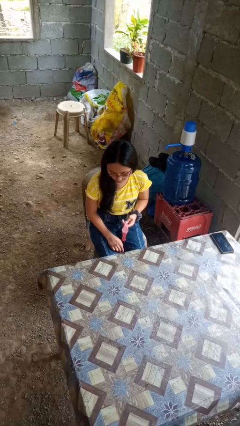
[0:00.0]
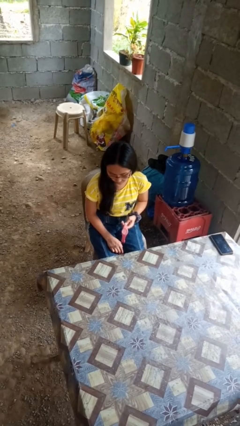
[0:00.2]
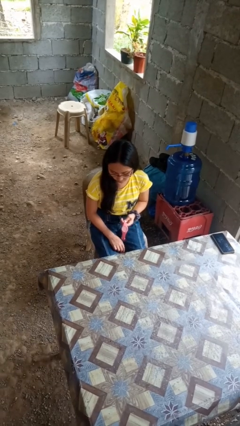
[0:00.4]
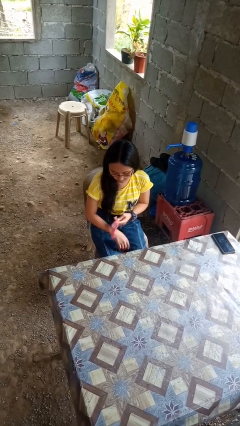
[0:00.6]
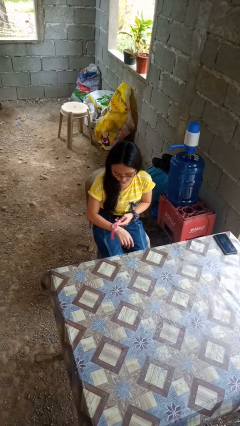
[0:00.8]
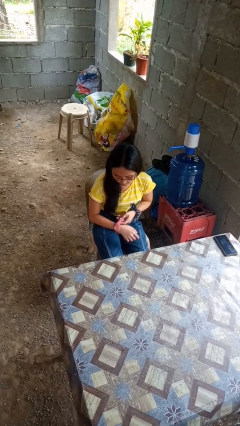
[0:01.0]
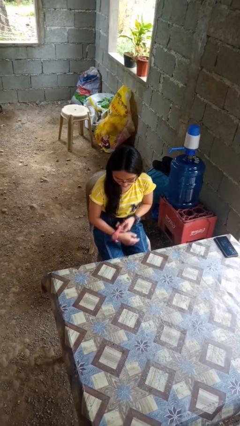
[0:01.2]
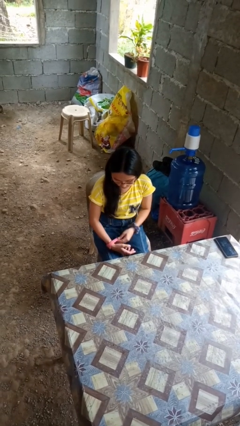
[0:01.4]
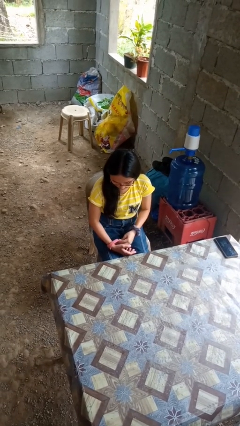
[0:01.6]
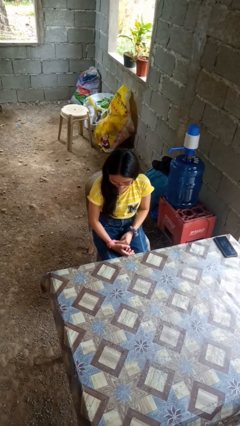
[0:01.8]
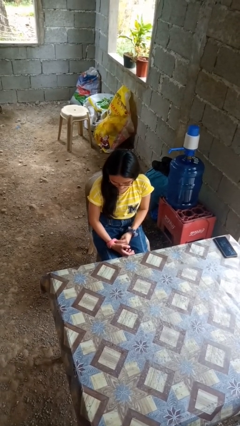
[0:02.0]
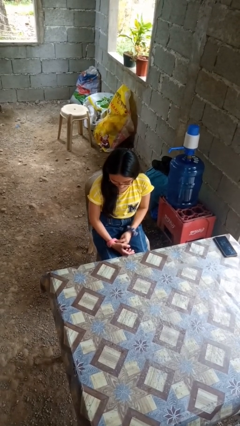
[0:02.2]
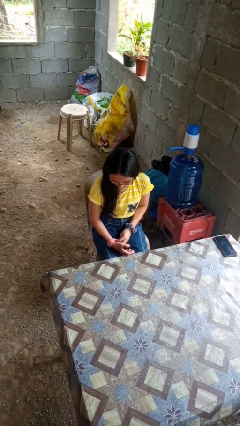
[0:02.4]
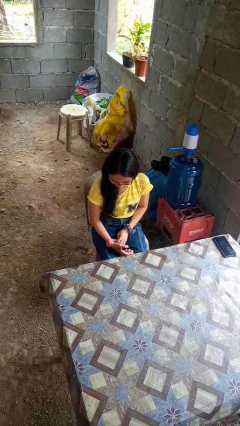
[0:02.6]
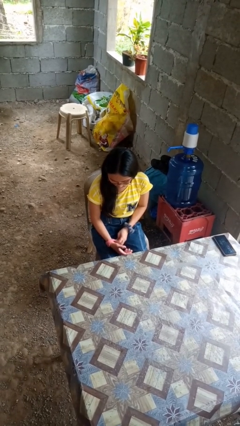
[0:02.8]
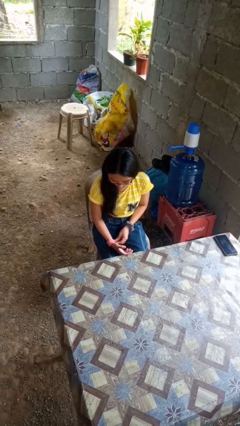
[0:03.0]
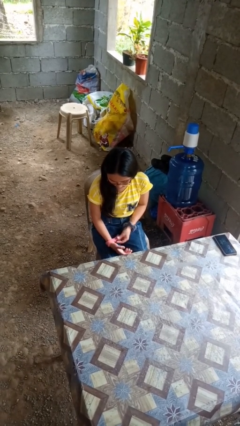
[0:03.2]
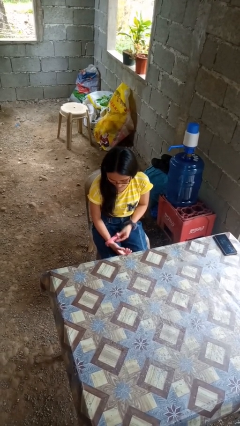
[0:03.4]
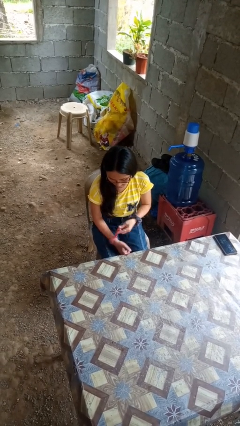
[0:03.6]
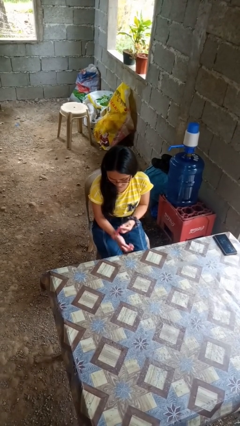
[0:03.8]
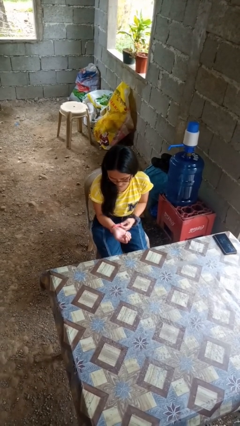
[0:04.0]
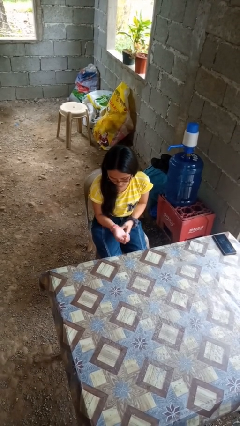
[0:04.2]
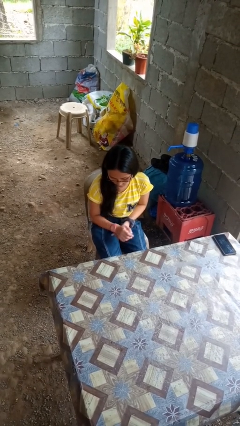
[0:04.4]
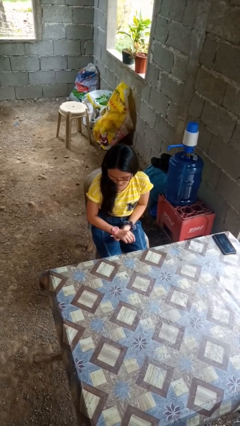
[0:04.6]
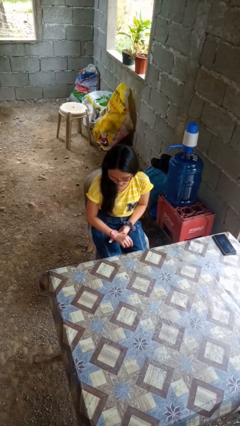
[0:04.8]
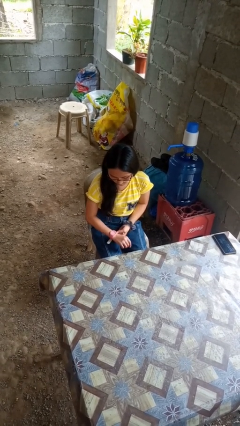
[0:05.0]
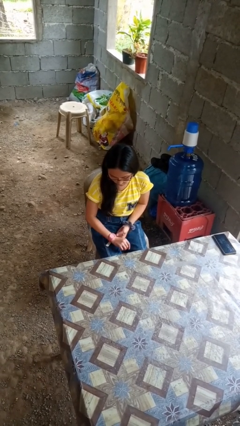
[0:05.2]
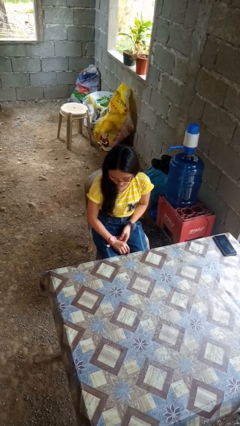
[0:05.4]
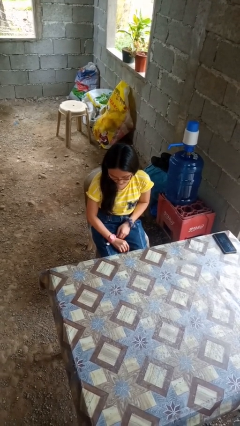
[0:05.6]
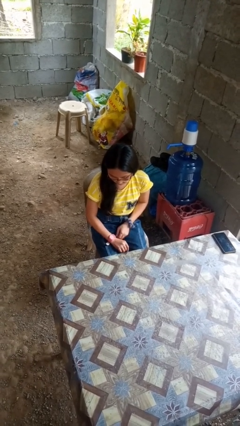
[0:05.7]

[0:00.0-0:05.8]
person puts on wristwatch

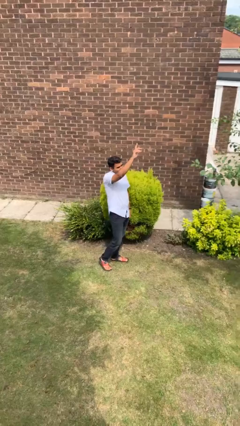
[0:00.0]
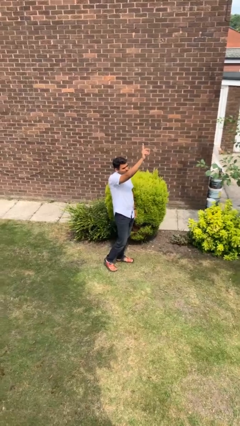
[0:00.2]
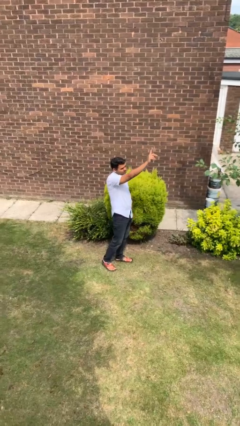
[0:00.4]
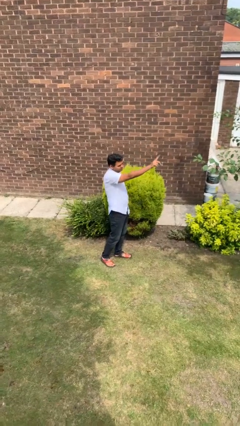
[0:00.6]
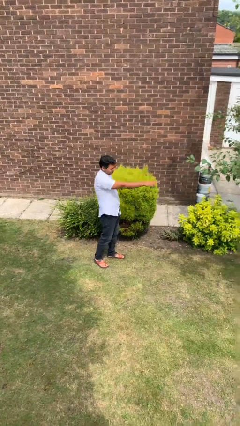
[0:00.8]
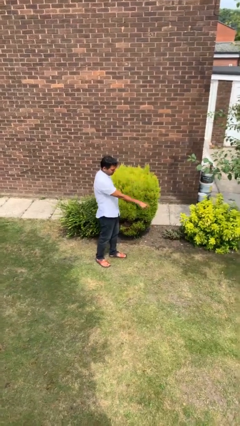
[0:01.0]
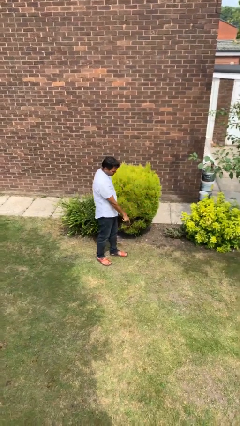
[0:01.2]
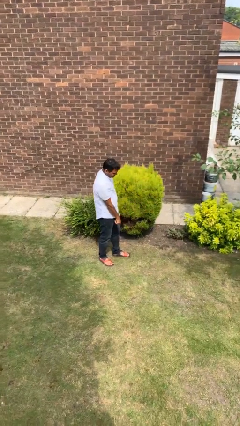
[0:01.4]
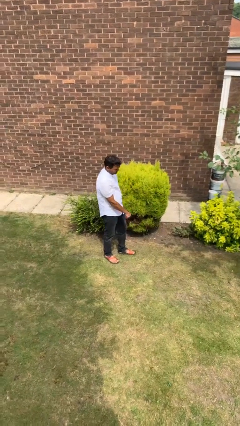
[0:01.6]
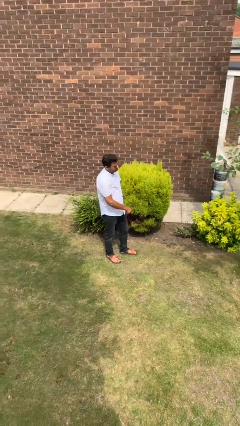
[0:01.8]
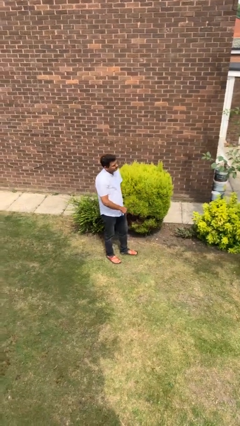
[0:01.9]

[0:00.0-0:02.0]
person gestures swipe down

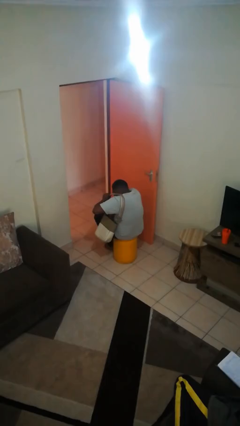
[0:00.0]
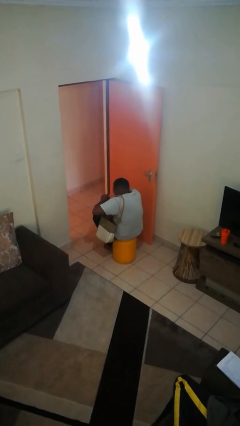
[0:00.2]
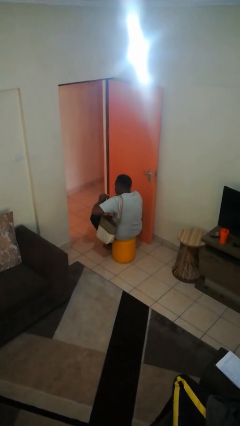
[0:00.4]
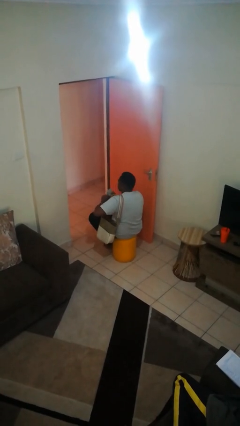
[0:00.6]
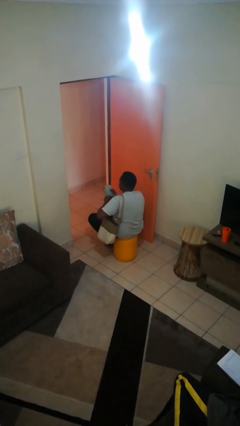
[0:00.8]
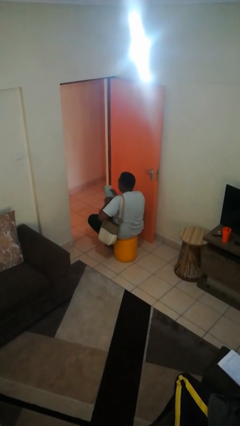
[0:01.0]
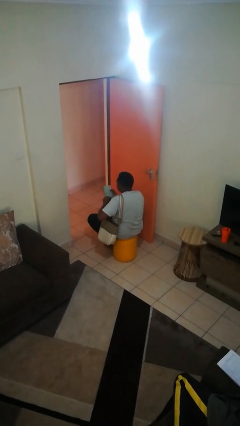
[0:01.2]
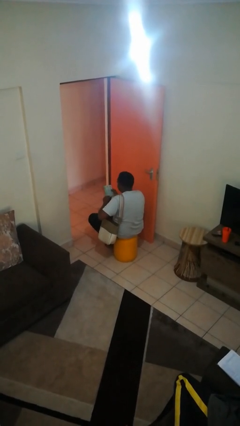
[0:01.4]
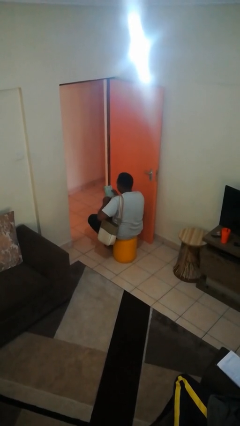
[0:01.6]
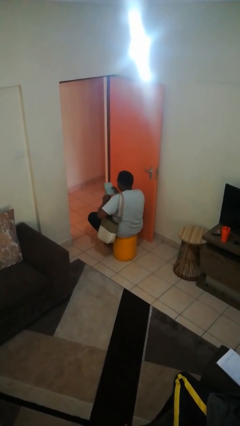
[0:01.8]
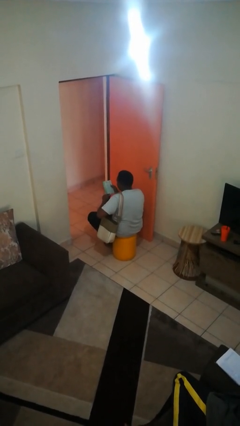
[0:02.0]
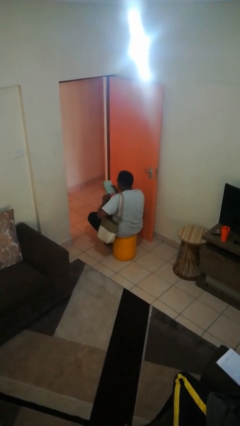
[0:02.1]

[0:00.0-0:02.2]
person takes object from purse

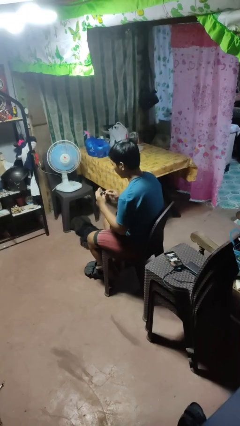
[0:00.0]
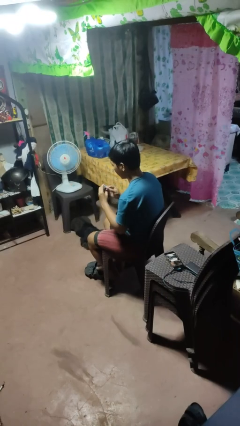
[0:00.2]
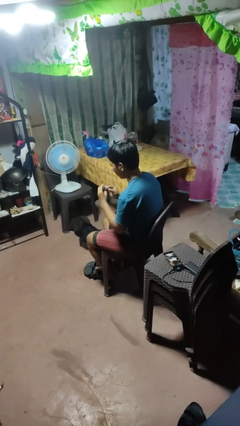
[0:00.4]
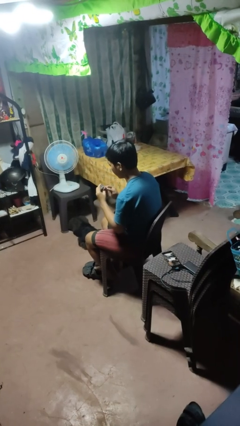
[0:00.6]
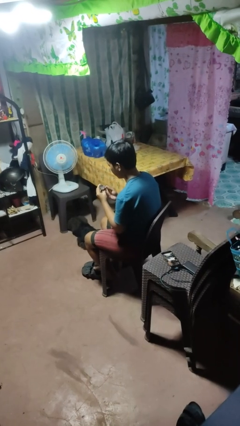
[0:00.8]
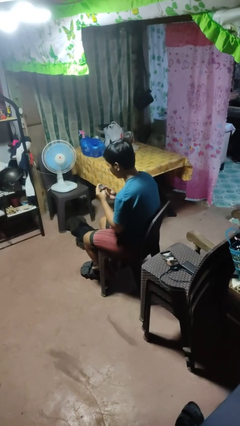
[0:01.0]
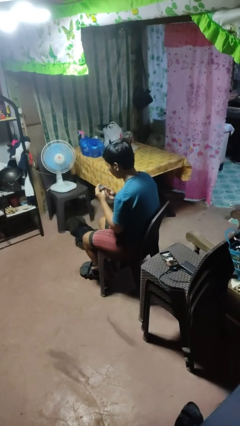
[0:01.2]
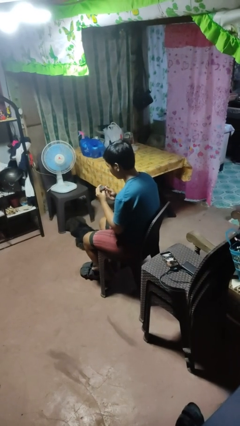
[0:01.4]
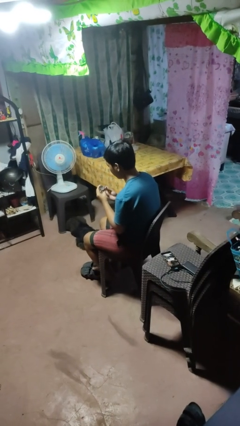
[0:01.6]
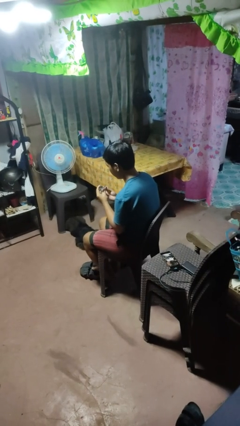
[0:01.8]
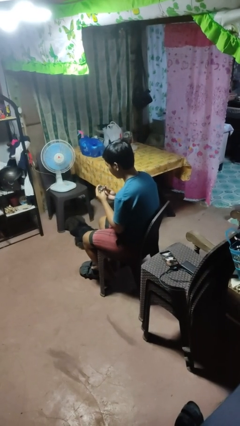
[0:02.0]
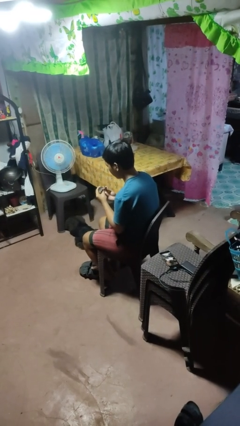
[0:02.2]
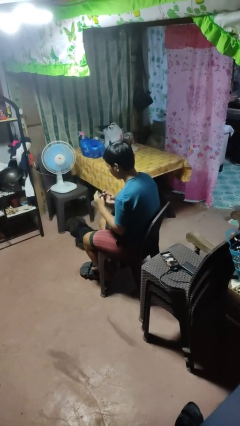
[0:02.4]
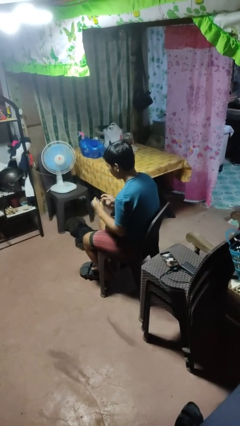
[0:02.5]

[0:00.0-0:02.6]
person clips fingernails

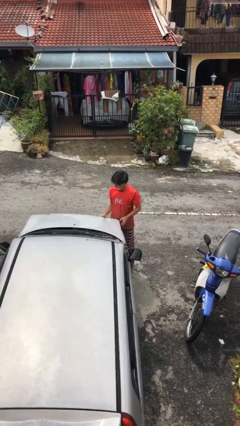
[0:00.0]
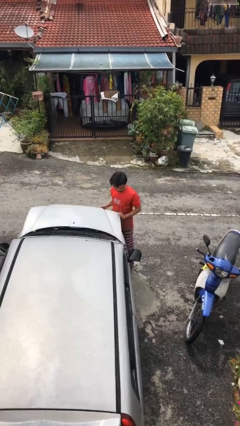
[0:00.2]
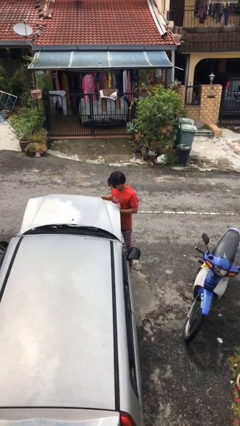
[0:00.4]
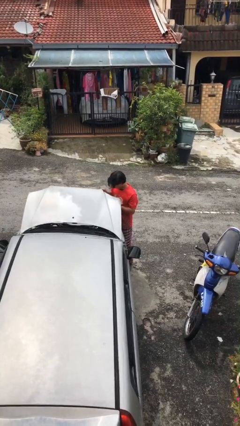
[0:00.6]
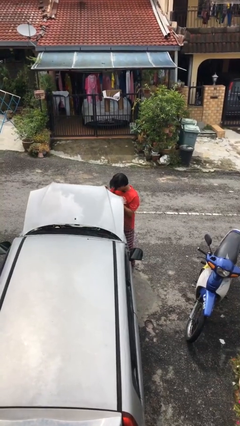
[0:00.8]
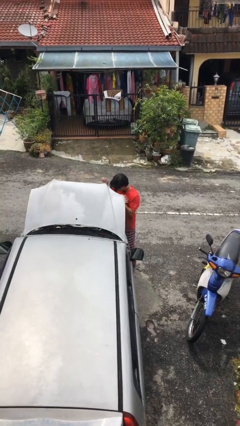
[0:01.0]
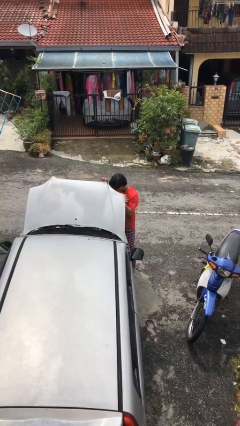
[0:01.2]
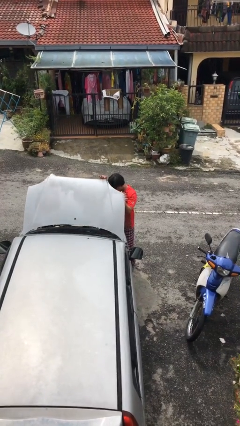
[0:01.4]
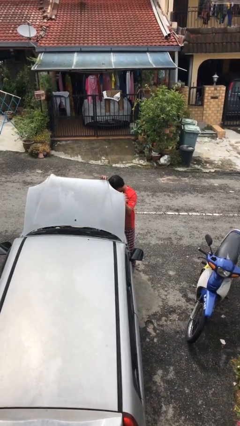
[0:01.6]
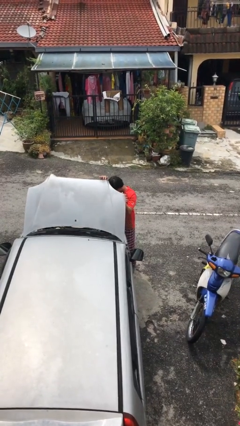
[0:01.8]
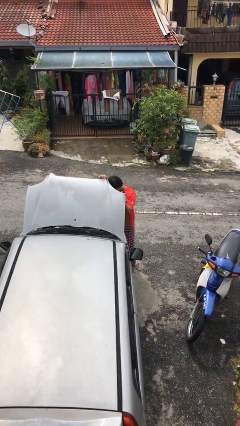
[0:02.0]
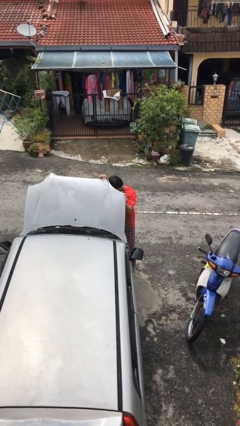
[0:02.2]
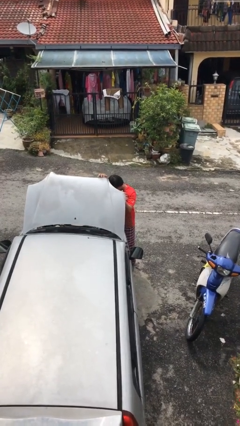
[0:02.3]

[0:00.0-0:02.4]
person opens car hood

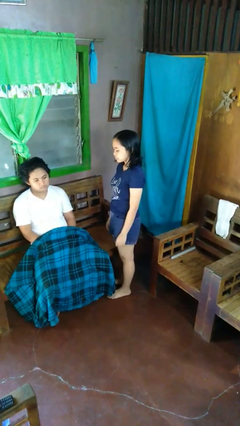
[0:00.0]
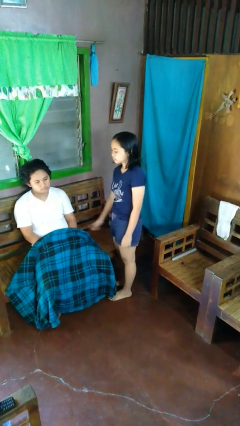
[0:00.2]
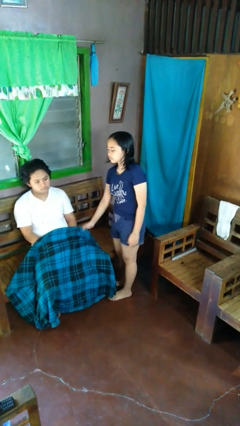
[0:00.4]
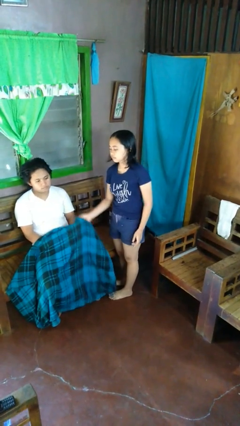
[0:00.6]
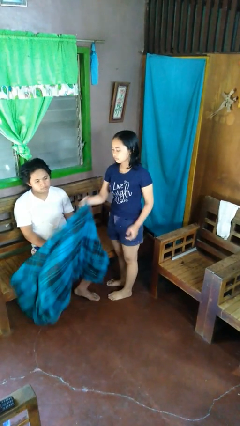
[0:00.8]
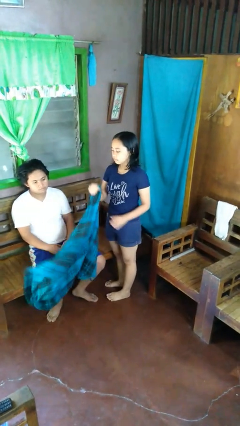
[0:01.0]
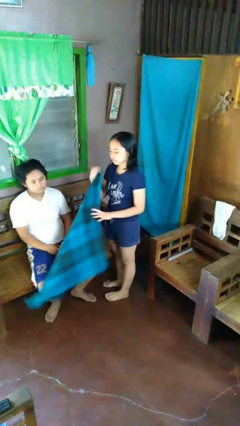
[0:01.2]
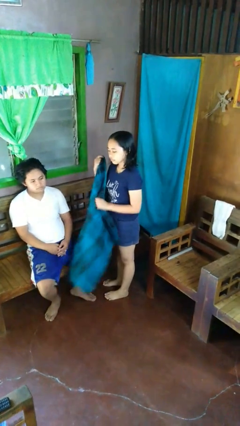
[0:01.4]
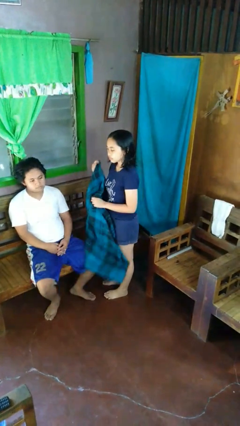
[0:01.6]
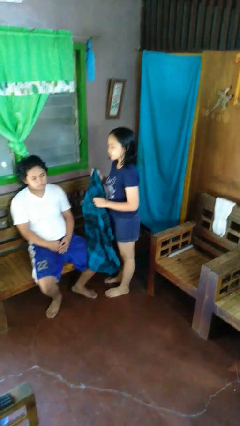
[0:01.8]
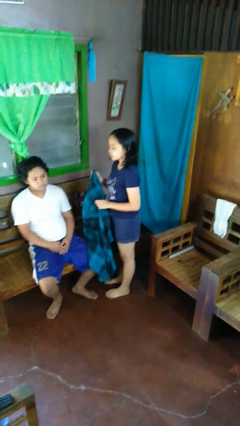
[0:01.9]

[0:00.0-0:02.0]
person uncovers friend with blanket

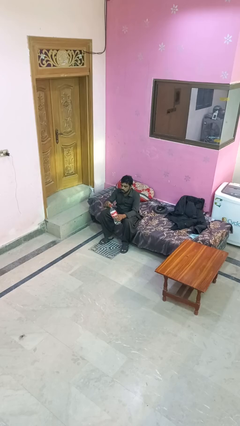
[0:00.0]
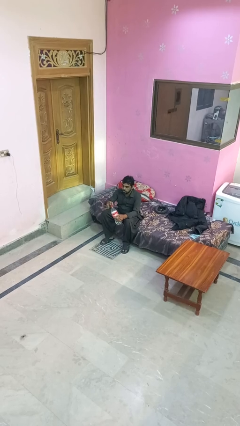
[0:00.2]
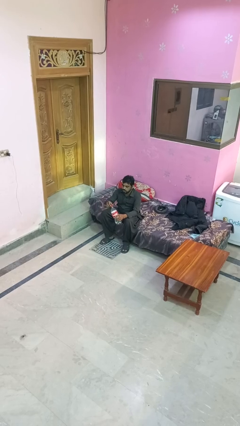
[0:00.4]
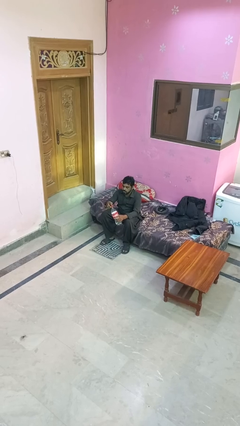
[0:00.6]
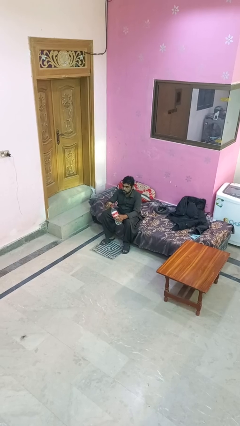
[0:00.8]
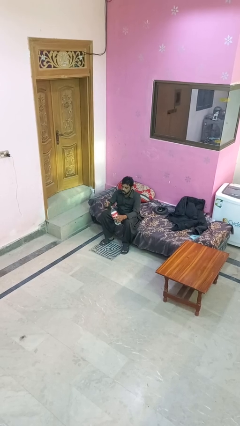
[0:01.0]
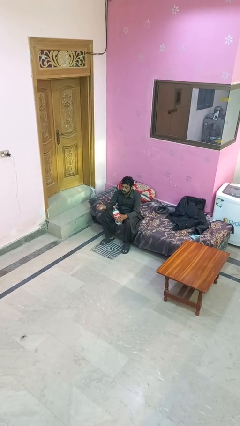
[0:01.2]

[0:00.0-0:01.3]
person unscrews lid from bottle
